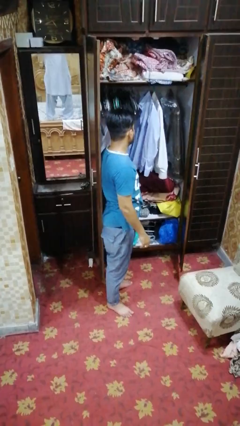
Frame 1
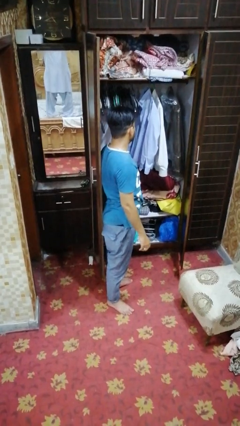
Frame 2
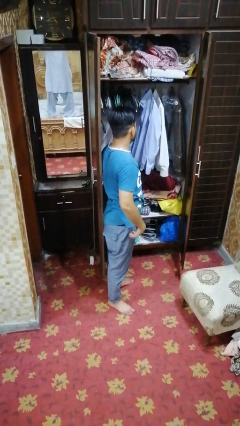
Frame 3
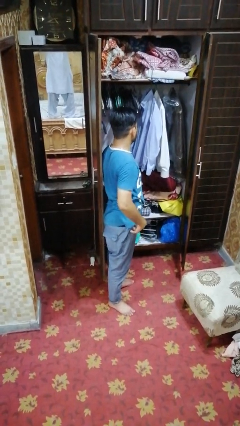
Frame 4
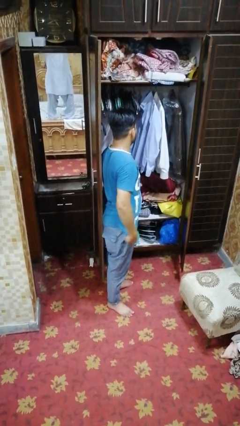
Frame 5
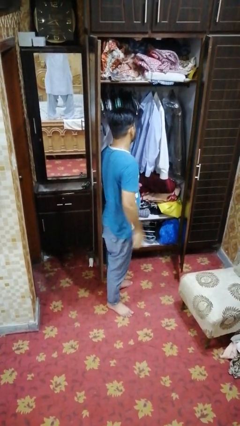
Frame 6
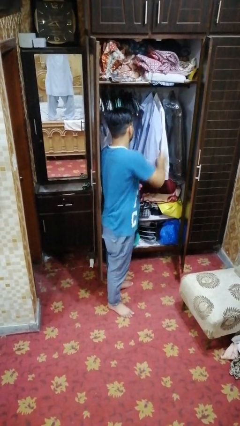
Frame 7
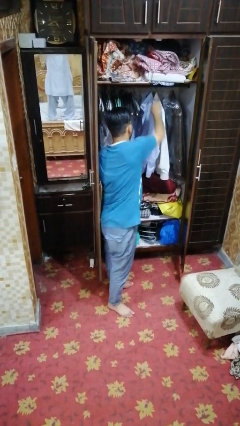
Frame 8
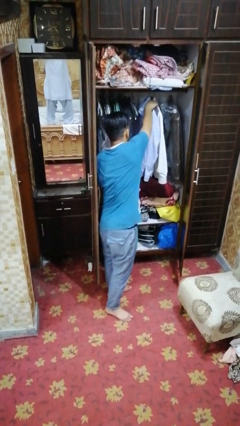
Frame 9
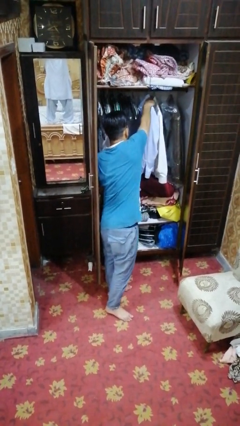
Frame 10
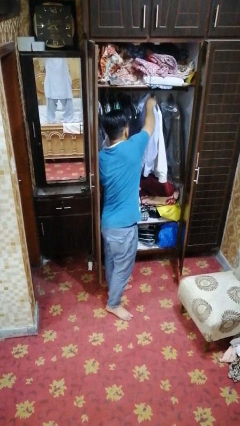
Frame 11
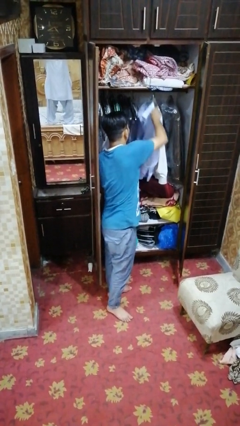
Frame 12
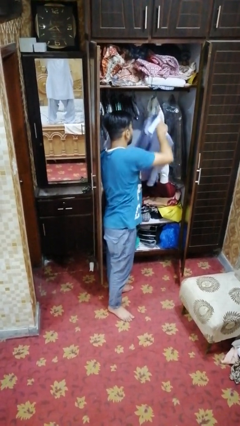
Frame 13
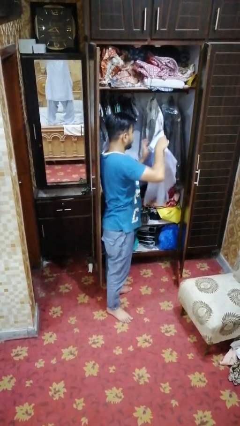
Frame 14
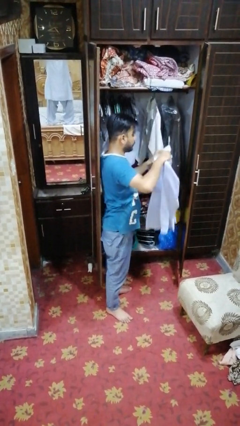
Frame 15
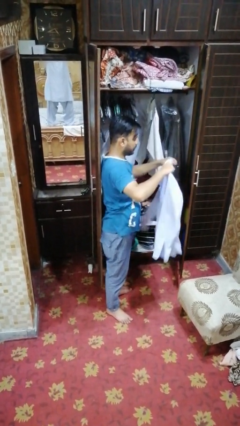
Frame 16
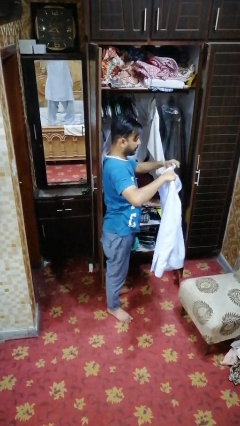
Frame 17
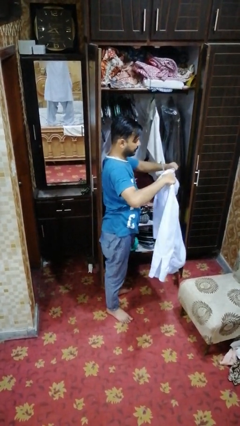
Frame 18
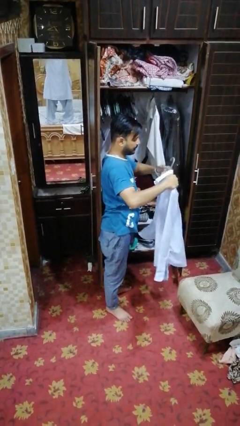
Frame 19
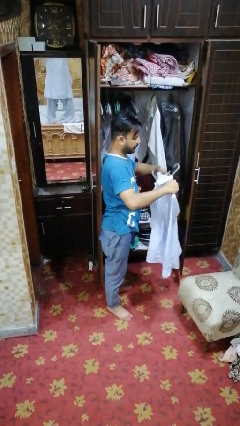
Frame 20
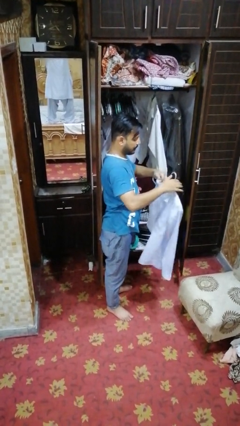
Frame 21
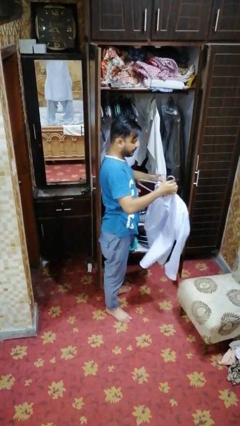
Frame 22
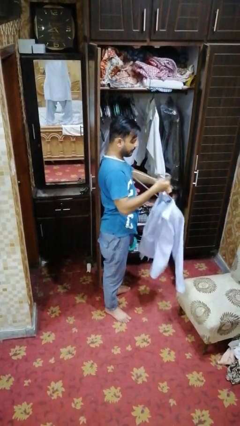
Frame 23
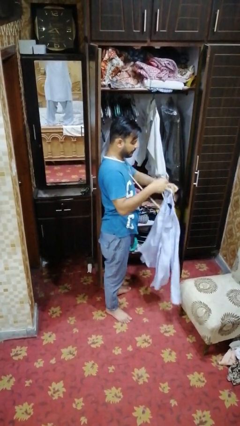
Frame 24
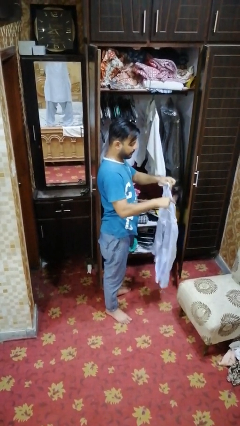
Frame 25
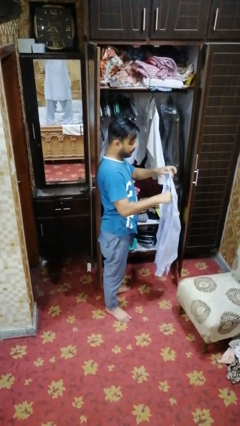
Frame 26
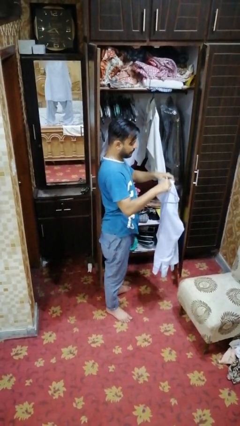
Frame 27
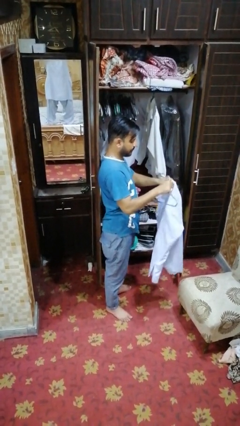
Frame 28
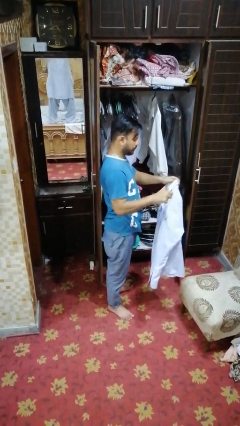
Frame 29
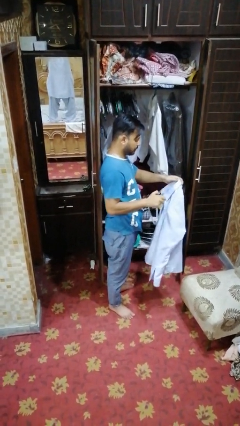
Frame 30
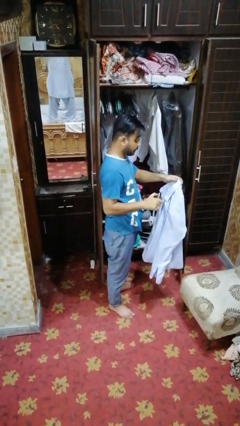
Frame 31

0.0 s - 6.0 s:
person takes clothes from closet

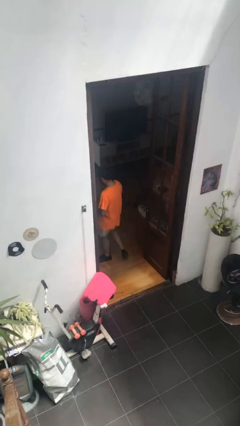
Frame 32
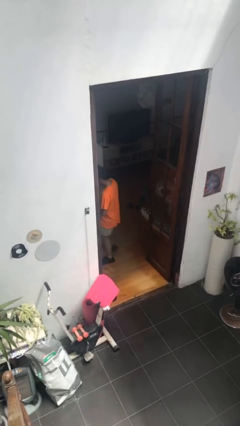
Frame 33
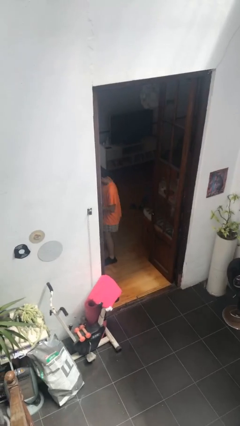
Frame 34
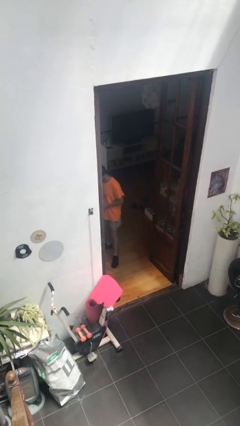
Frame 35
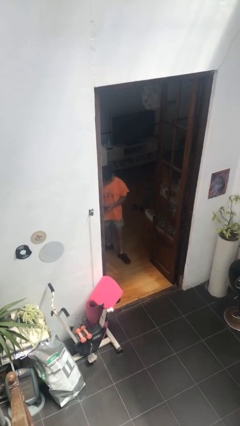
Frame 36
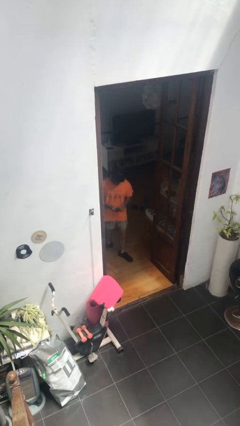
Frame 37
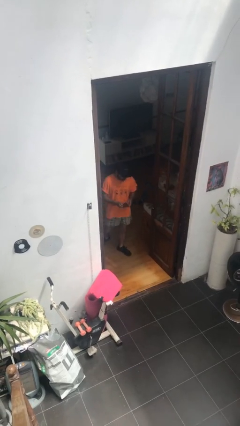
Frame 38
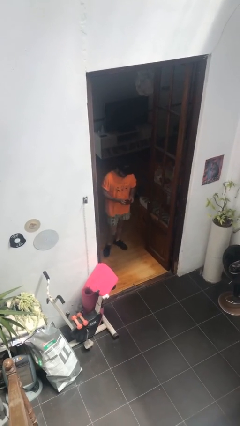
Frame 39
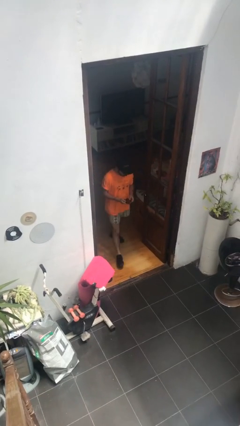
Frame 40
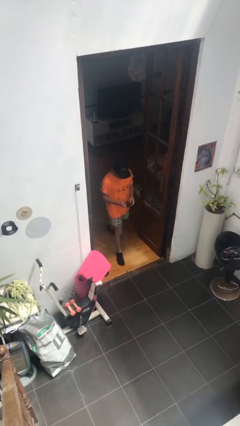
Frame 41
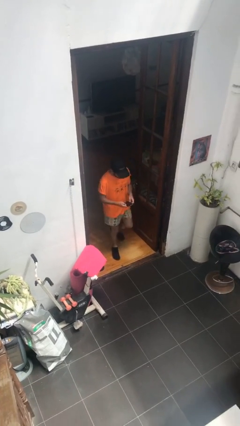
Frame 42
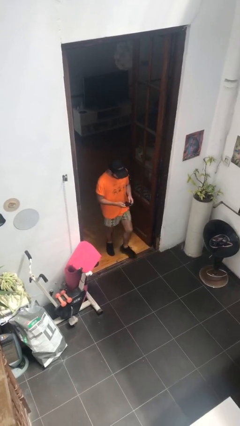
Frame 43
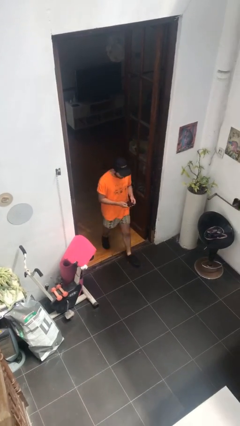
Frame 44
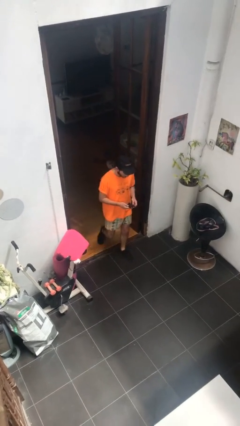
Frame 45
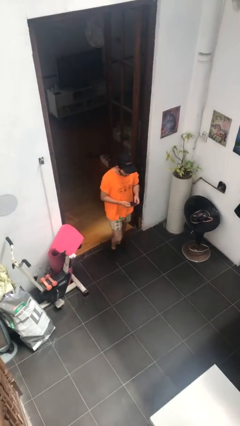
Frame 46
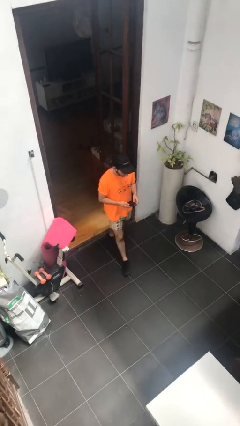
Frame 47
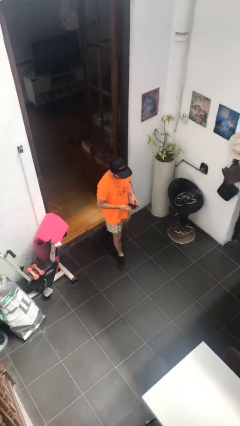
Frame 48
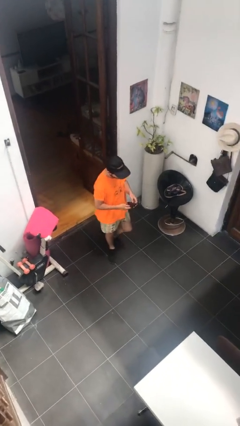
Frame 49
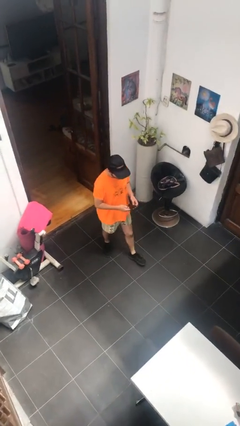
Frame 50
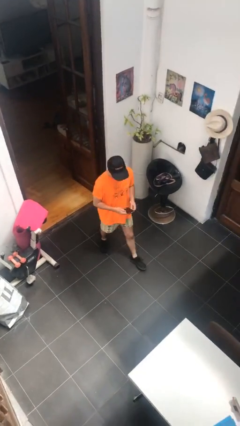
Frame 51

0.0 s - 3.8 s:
person enters scene through structure

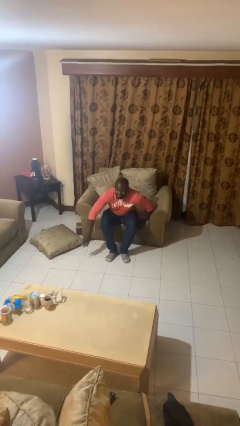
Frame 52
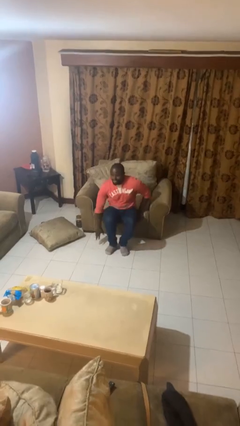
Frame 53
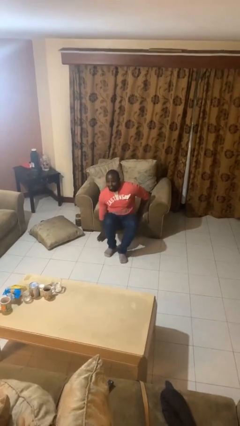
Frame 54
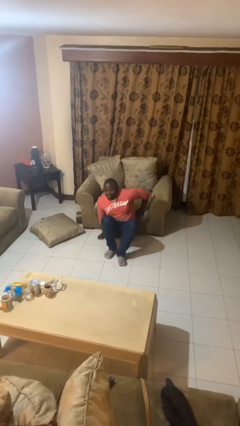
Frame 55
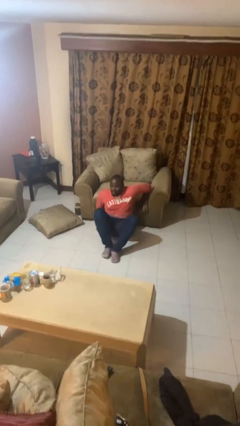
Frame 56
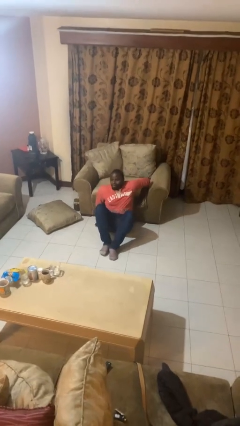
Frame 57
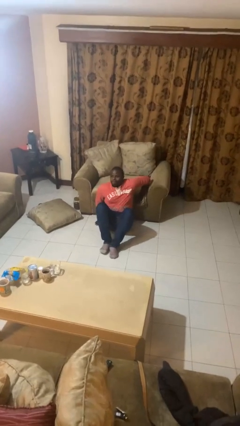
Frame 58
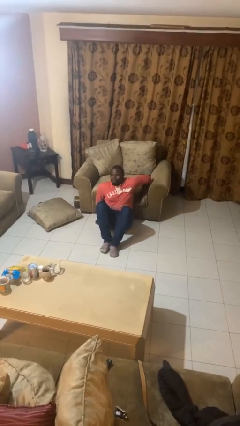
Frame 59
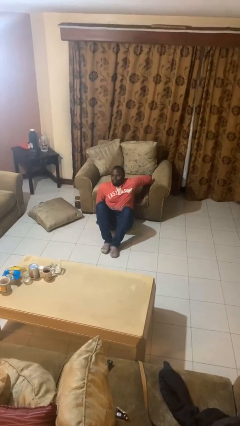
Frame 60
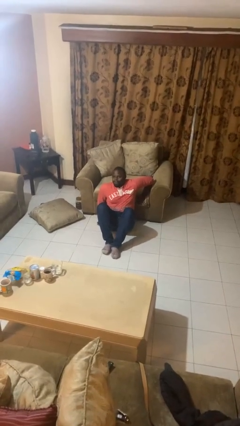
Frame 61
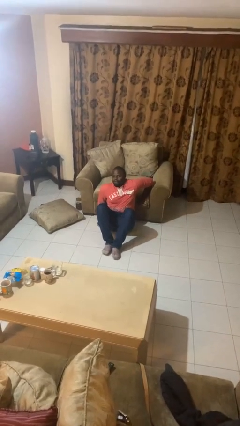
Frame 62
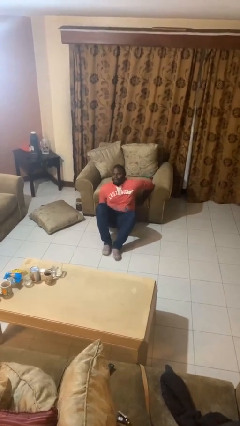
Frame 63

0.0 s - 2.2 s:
person falls from chair

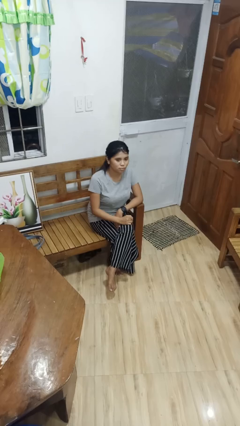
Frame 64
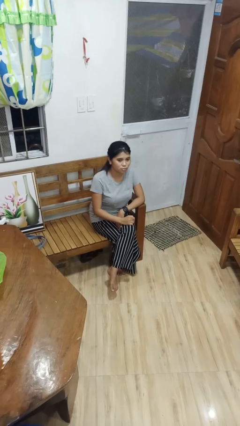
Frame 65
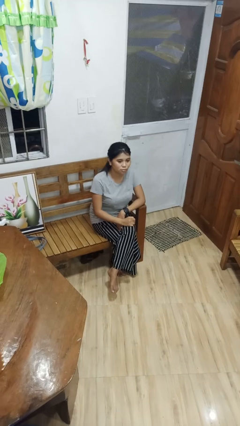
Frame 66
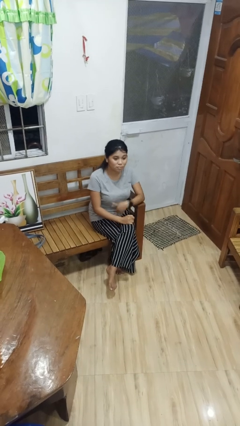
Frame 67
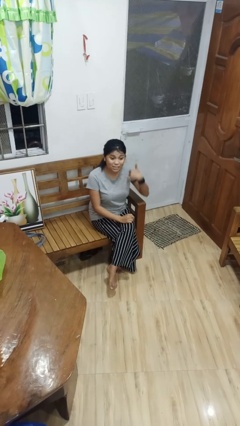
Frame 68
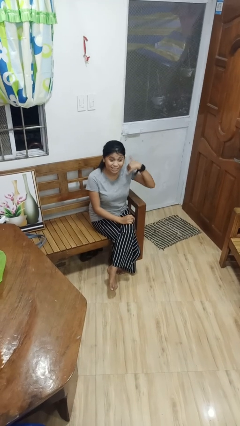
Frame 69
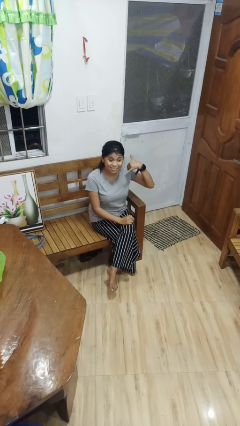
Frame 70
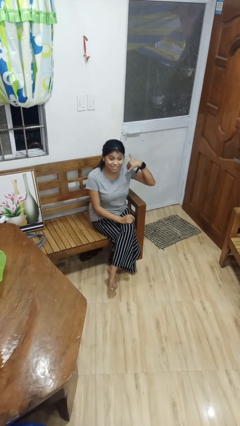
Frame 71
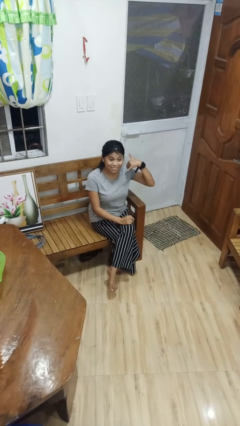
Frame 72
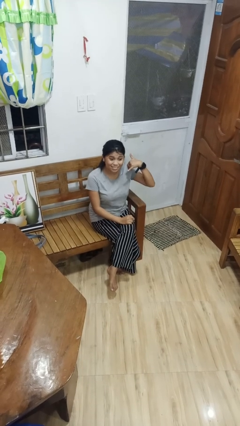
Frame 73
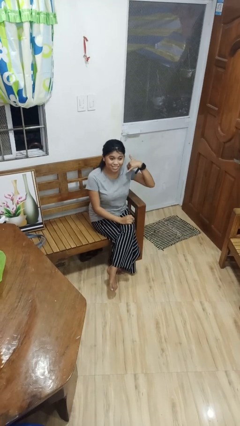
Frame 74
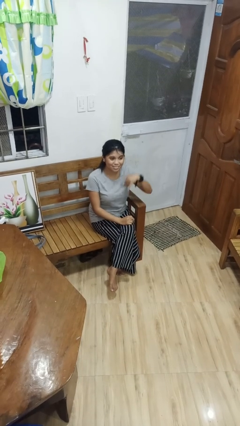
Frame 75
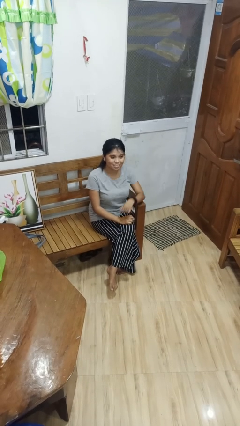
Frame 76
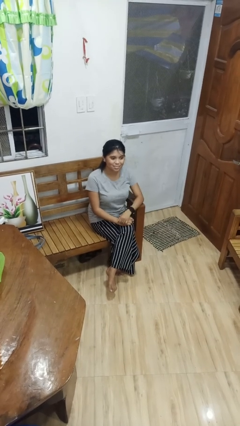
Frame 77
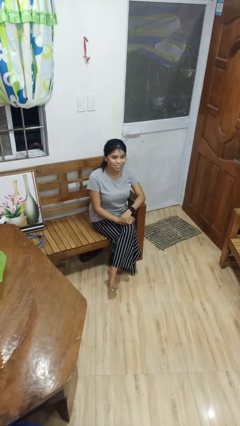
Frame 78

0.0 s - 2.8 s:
person gestures call me

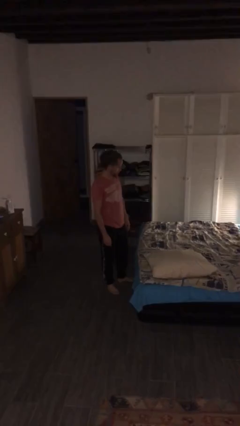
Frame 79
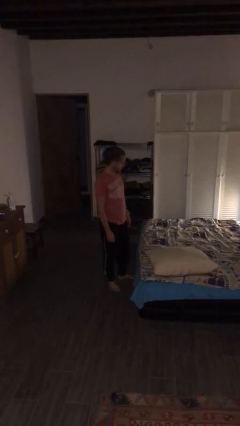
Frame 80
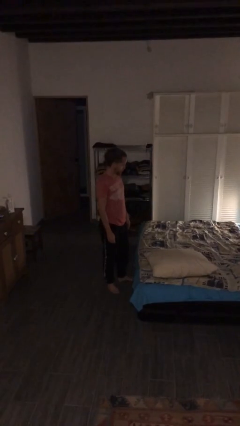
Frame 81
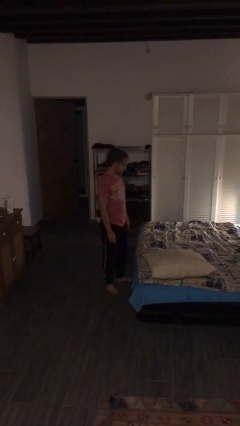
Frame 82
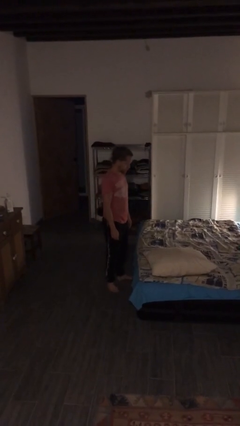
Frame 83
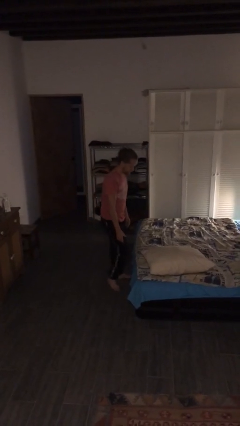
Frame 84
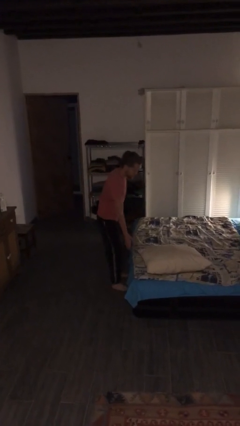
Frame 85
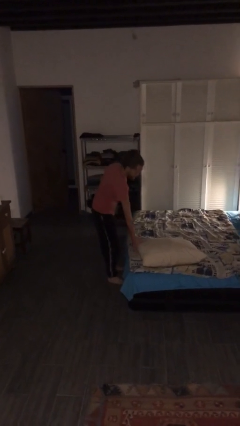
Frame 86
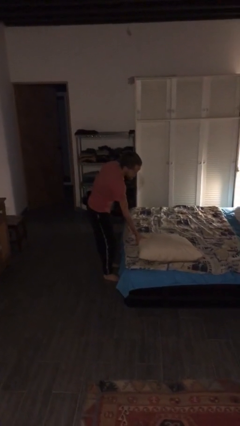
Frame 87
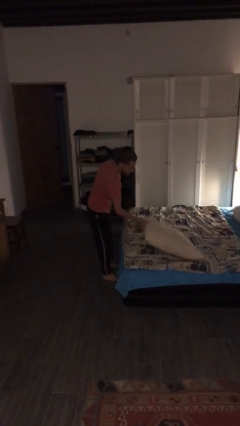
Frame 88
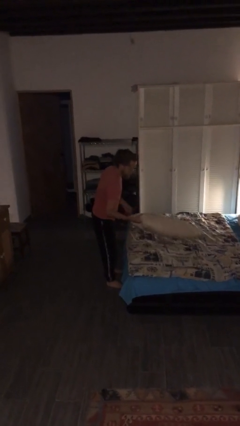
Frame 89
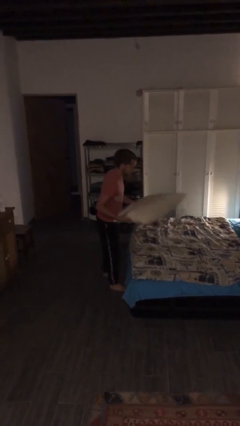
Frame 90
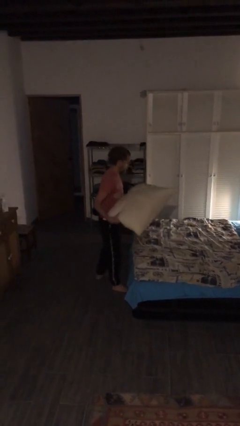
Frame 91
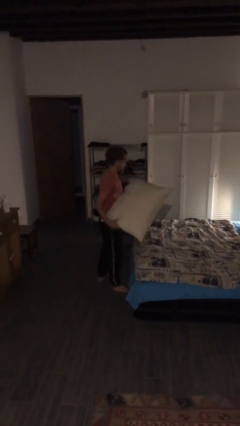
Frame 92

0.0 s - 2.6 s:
person picks up object from bed
